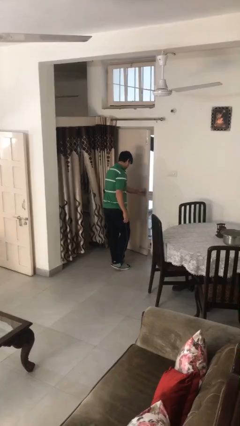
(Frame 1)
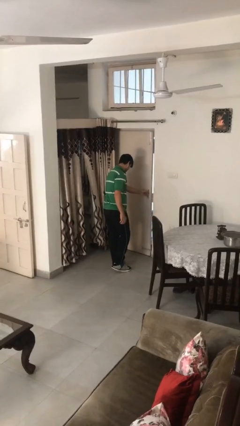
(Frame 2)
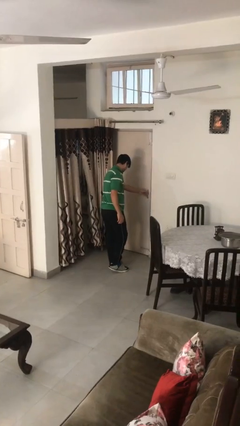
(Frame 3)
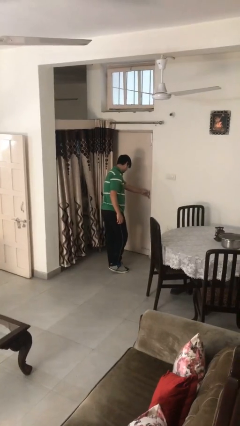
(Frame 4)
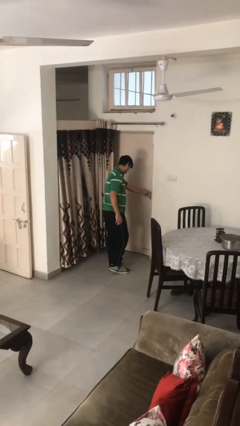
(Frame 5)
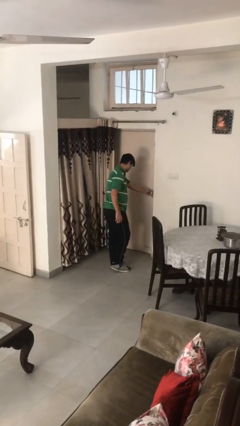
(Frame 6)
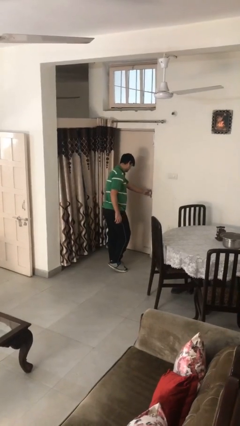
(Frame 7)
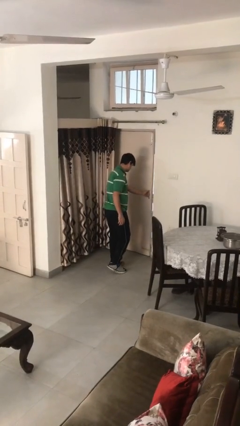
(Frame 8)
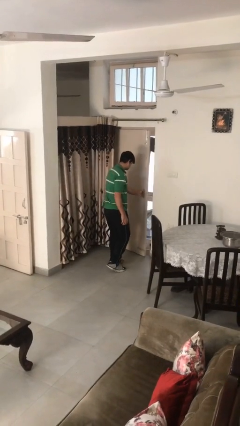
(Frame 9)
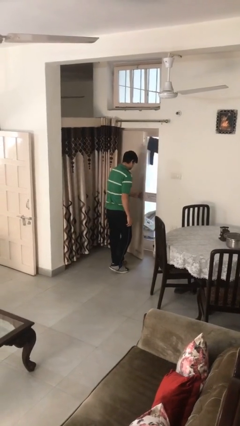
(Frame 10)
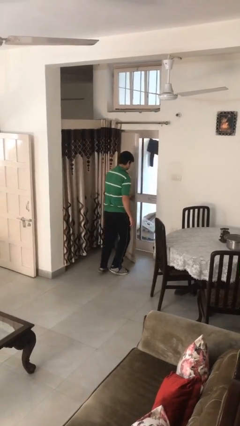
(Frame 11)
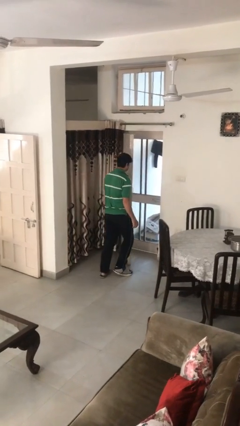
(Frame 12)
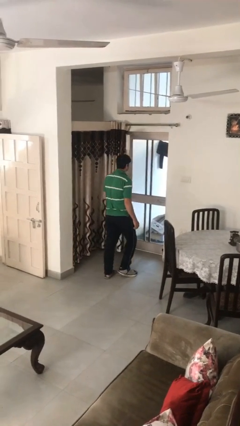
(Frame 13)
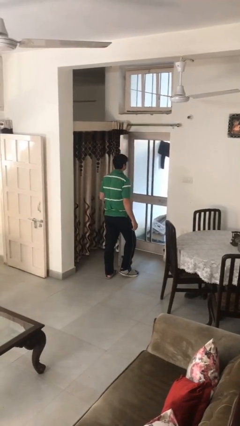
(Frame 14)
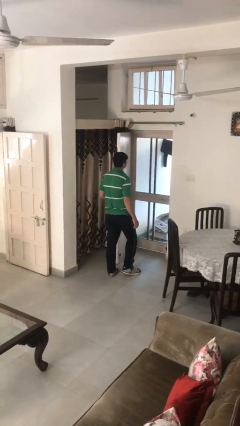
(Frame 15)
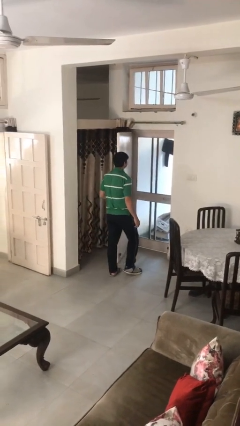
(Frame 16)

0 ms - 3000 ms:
person opens facility door

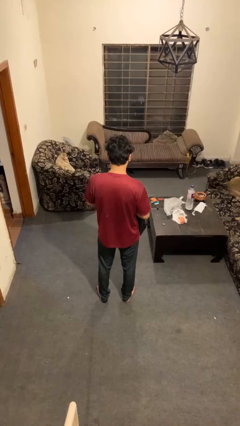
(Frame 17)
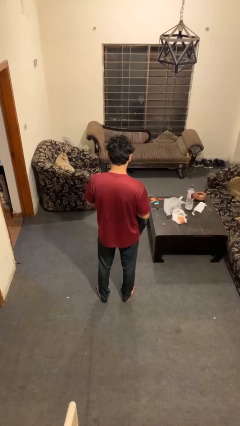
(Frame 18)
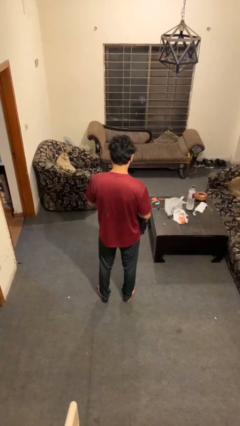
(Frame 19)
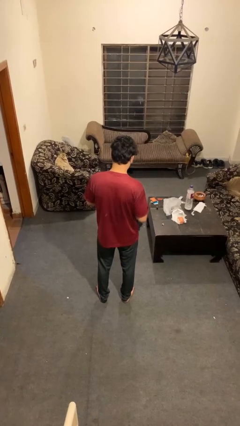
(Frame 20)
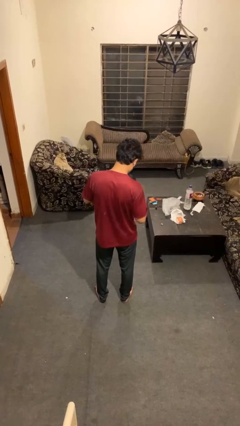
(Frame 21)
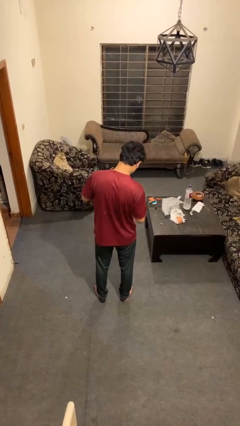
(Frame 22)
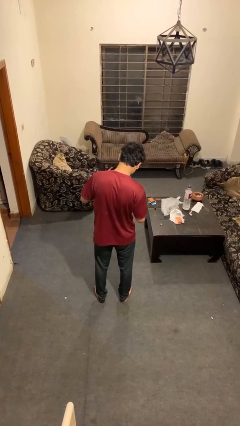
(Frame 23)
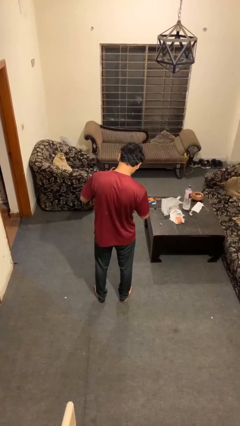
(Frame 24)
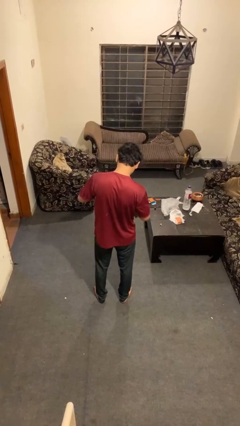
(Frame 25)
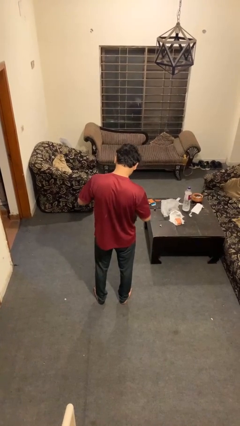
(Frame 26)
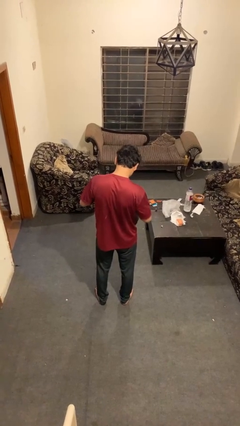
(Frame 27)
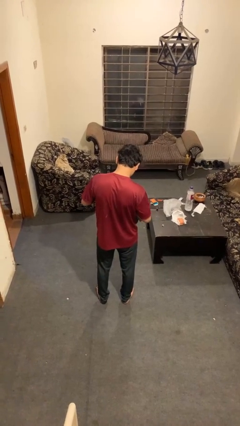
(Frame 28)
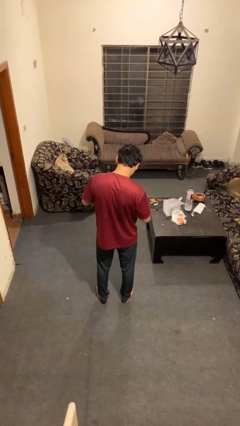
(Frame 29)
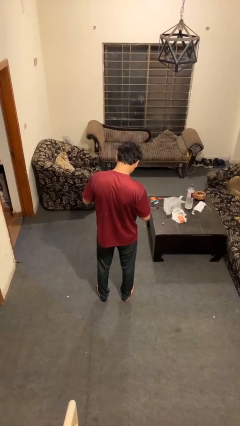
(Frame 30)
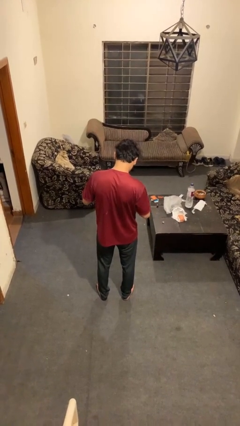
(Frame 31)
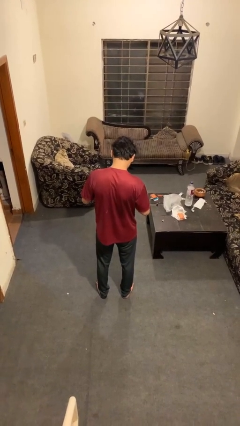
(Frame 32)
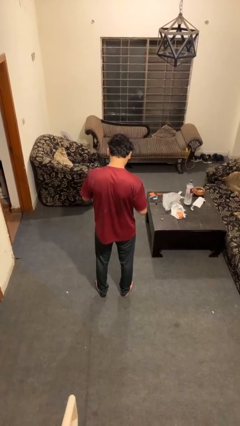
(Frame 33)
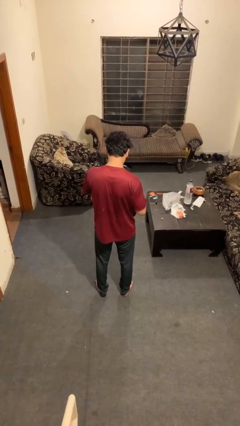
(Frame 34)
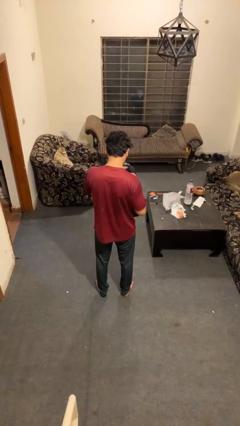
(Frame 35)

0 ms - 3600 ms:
person searches in bag

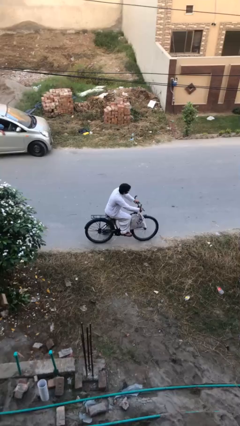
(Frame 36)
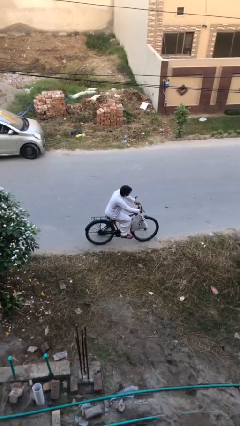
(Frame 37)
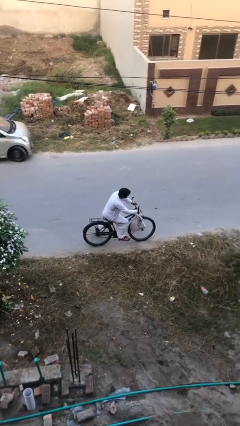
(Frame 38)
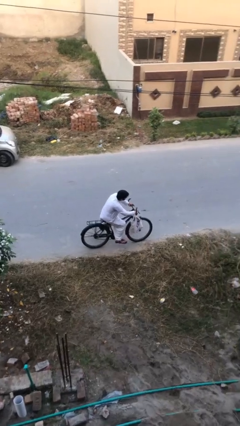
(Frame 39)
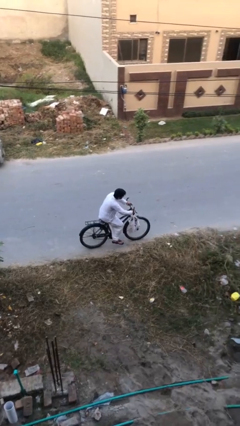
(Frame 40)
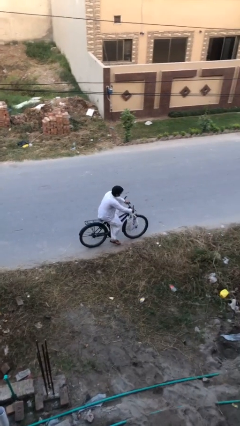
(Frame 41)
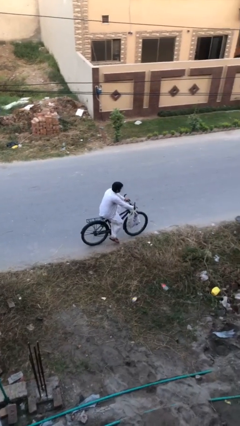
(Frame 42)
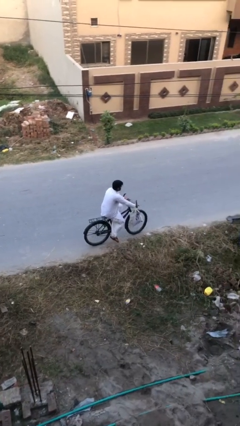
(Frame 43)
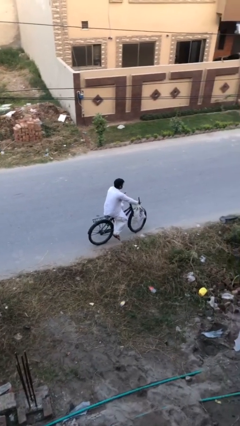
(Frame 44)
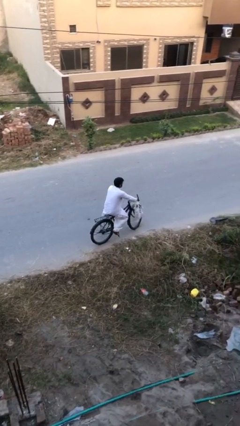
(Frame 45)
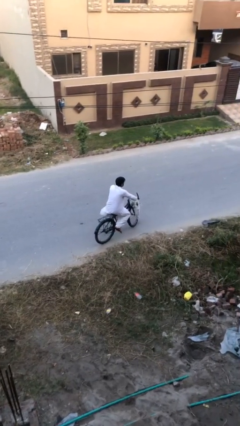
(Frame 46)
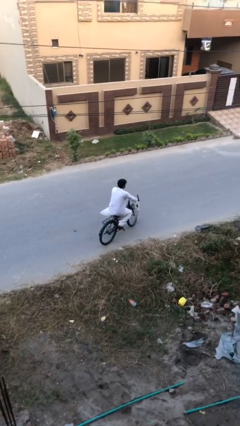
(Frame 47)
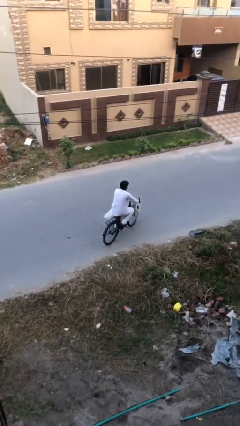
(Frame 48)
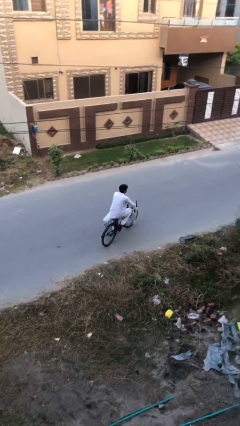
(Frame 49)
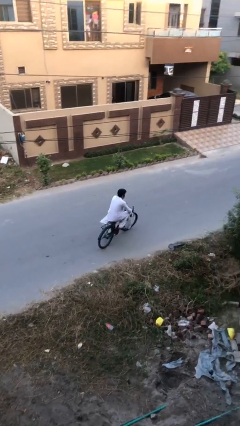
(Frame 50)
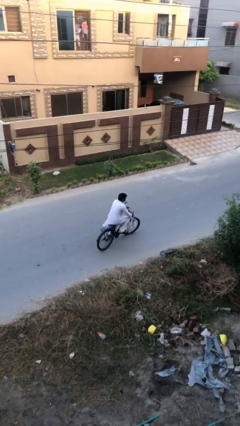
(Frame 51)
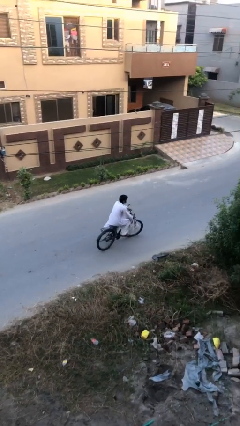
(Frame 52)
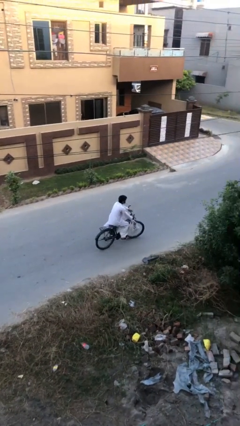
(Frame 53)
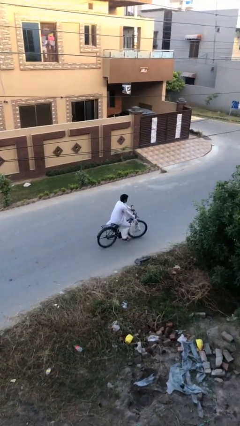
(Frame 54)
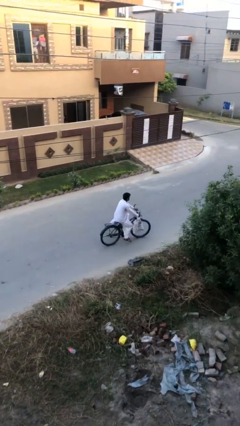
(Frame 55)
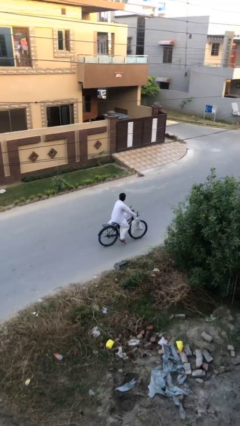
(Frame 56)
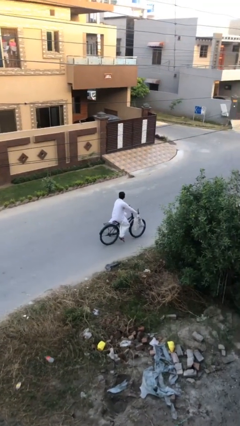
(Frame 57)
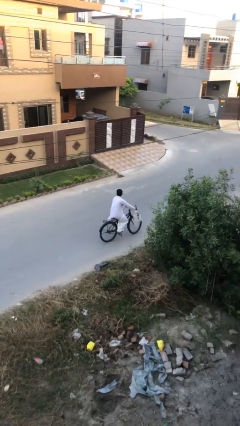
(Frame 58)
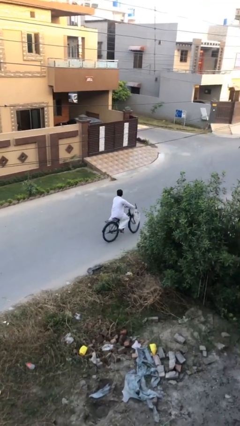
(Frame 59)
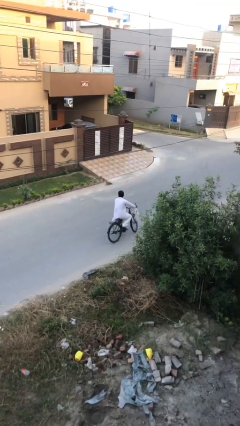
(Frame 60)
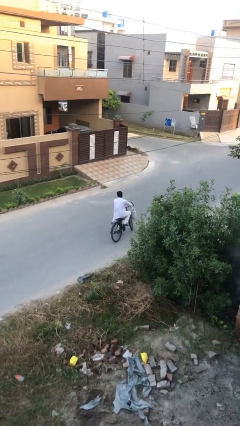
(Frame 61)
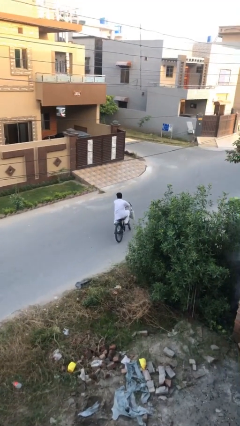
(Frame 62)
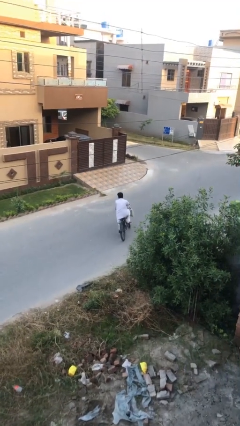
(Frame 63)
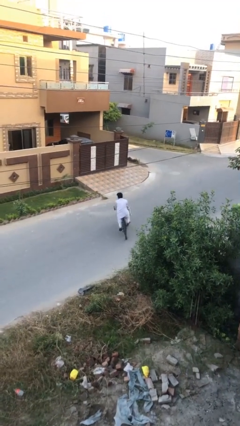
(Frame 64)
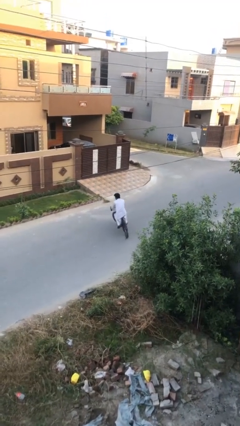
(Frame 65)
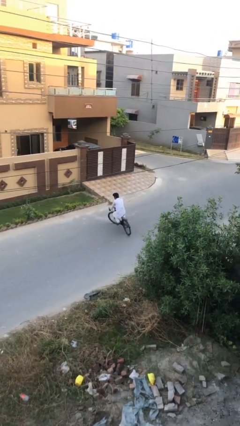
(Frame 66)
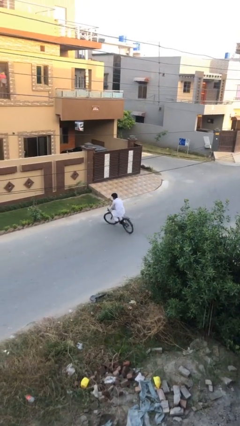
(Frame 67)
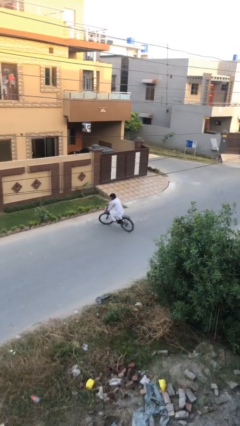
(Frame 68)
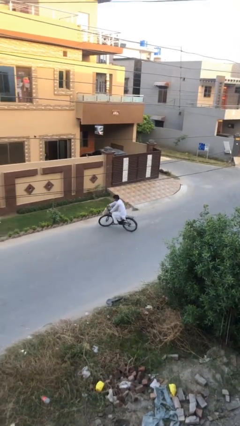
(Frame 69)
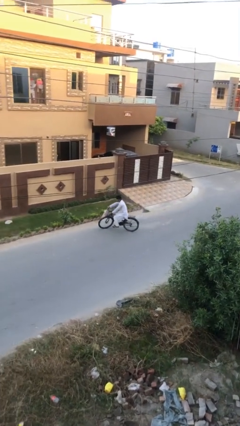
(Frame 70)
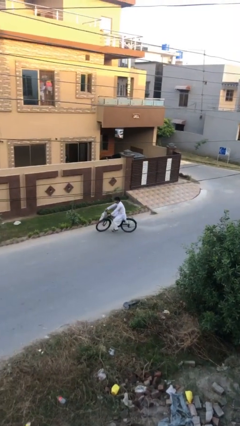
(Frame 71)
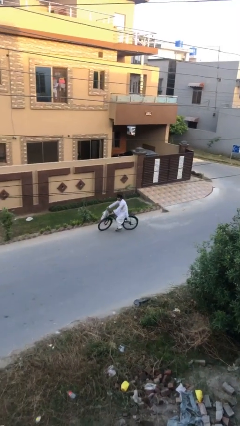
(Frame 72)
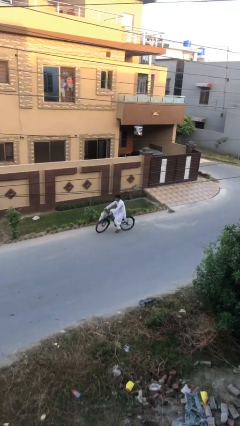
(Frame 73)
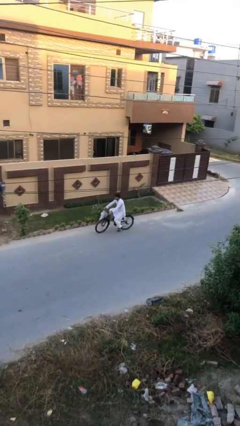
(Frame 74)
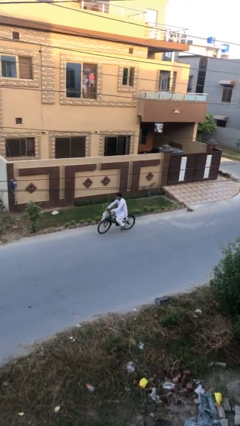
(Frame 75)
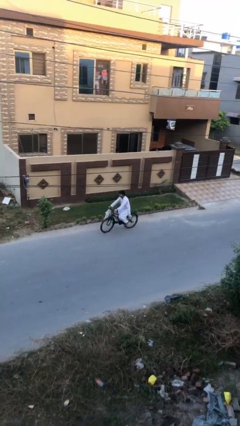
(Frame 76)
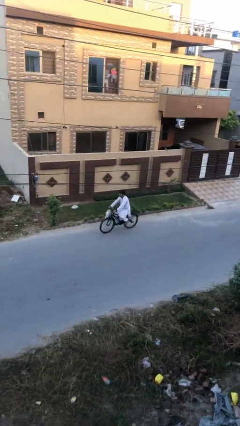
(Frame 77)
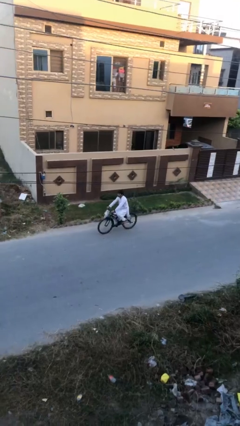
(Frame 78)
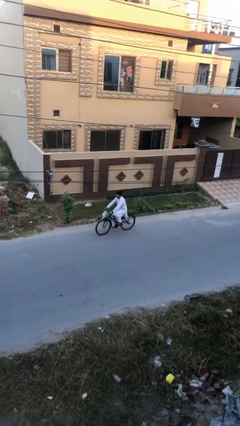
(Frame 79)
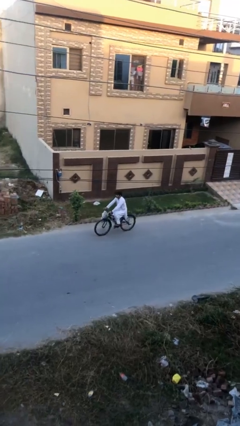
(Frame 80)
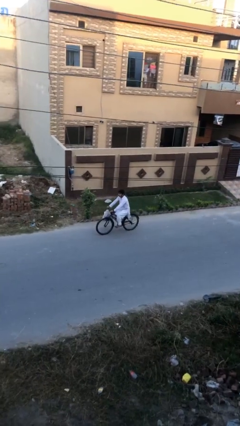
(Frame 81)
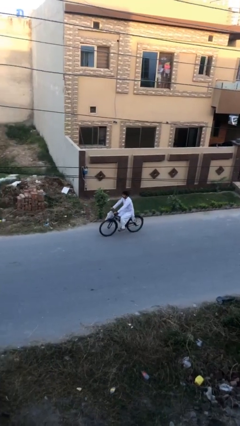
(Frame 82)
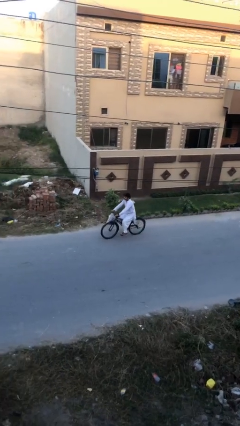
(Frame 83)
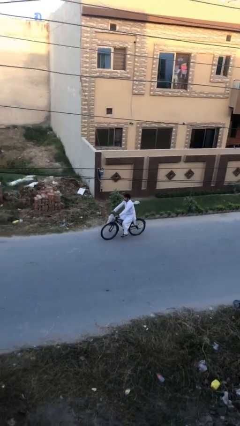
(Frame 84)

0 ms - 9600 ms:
person rides bicycle

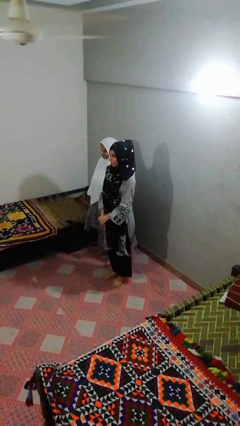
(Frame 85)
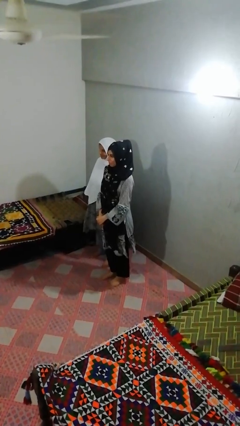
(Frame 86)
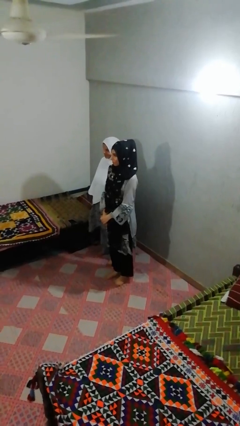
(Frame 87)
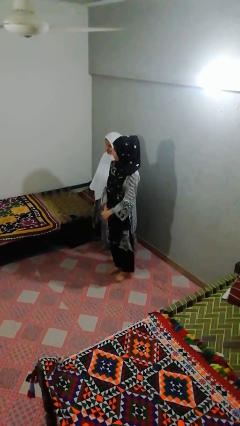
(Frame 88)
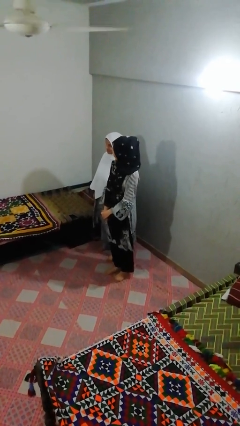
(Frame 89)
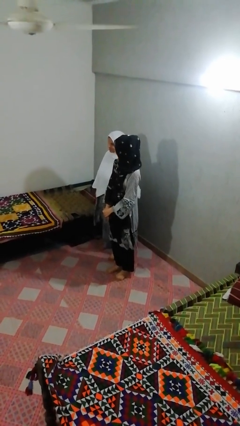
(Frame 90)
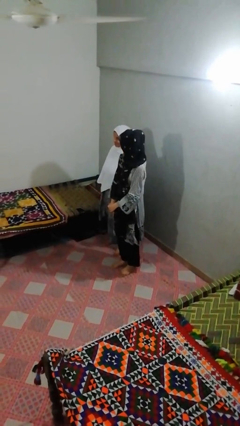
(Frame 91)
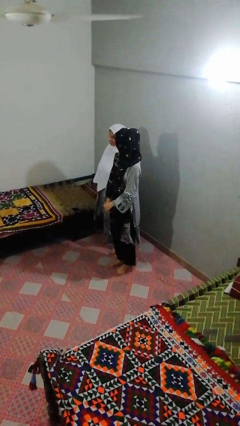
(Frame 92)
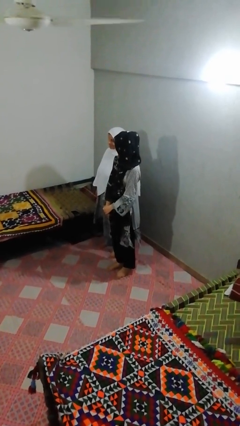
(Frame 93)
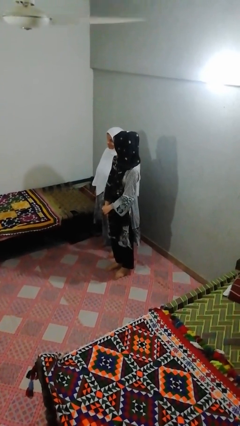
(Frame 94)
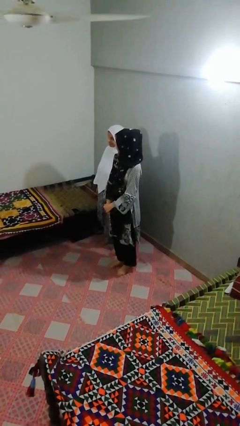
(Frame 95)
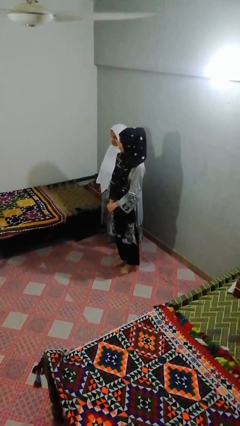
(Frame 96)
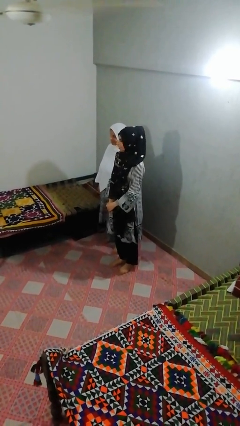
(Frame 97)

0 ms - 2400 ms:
person looks over shoulder
